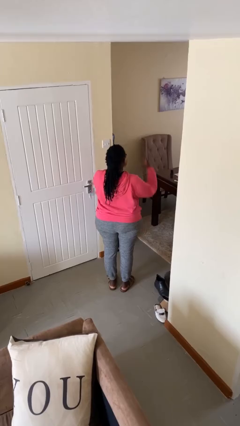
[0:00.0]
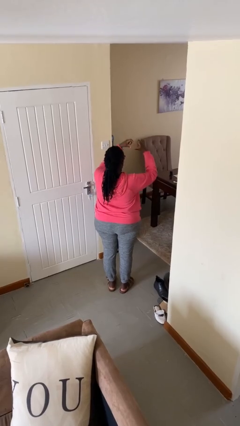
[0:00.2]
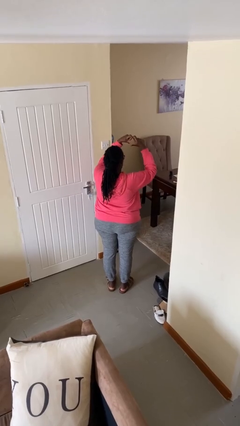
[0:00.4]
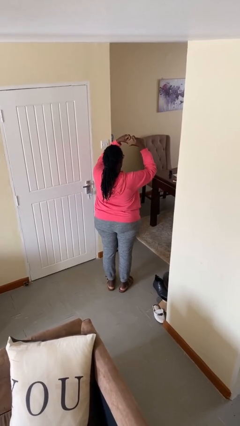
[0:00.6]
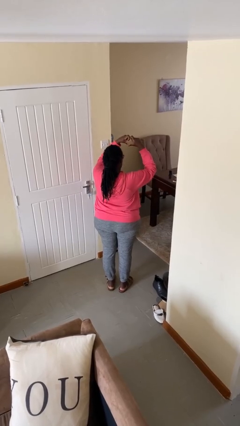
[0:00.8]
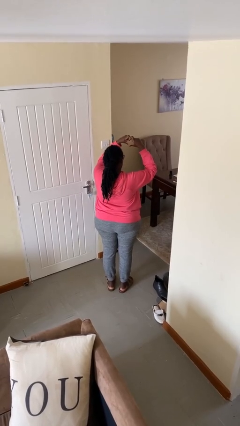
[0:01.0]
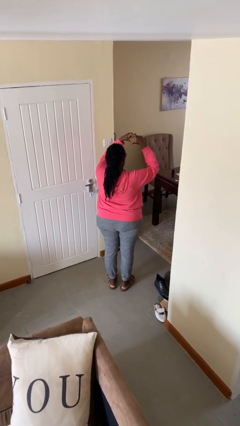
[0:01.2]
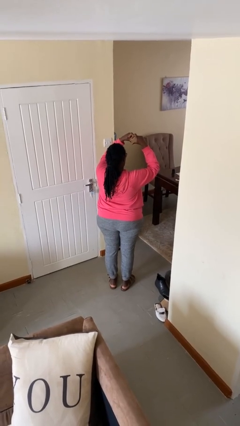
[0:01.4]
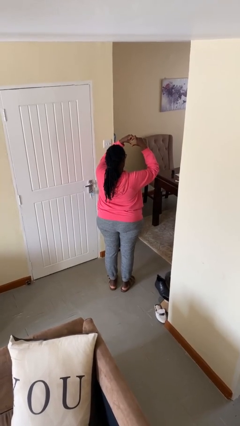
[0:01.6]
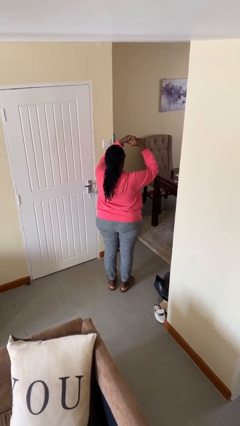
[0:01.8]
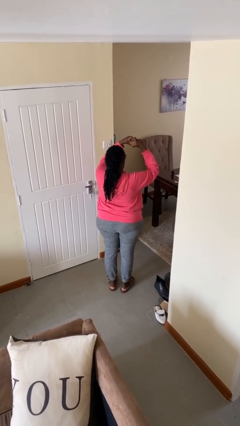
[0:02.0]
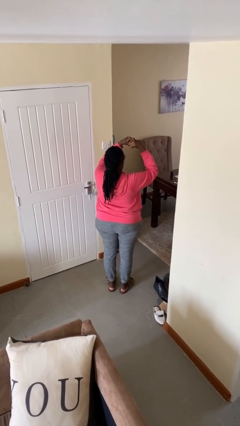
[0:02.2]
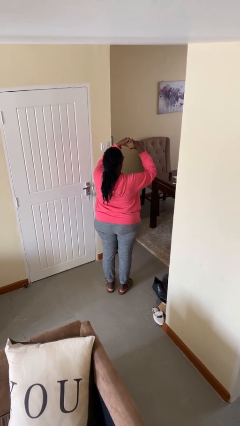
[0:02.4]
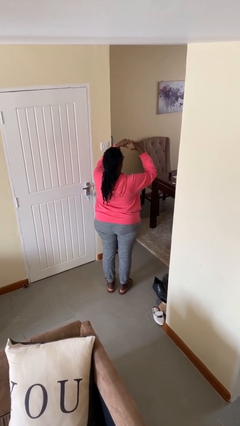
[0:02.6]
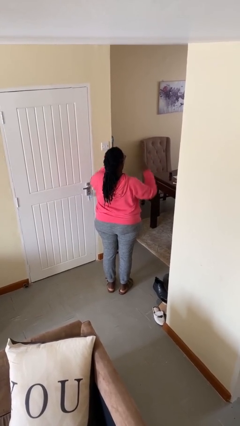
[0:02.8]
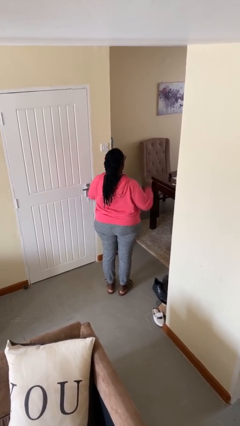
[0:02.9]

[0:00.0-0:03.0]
person gestures heart

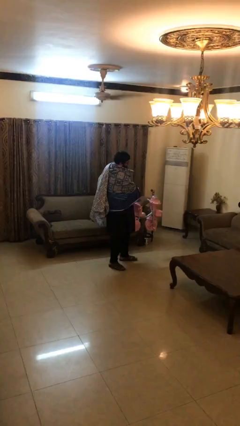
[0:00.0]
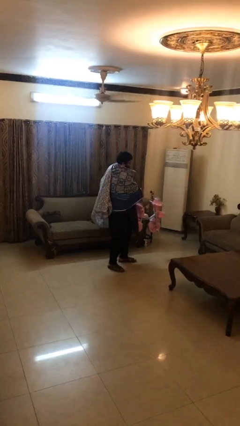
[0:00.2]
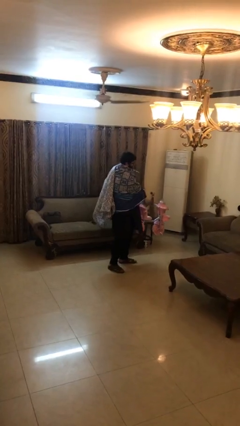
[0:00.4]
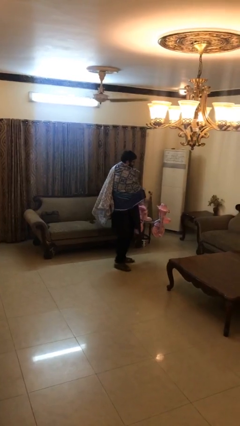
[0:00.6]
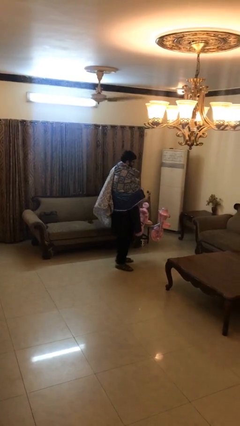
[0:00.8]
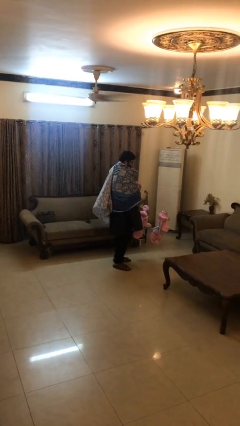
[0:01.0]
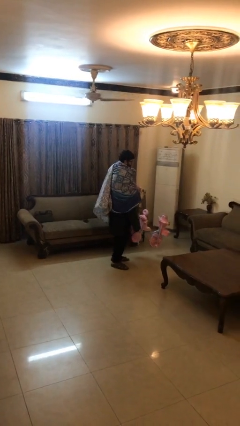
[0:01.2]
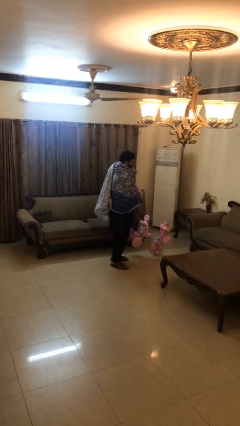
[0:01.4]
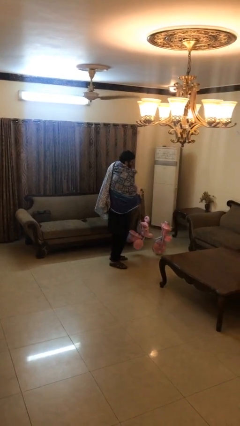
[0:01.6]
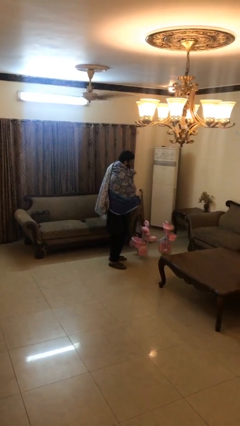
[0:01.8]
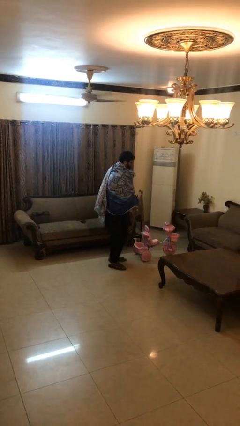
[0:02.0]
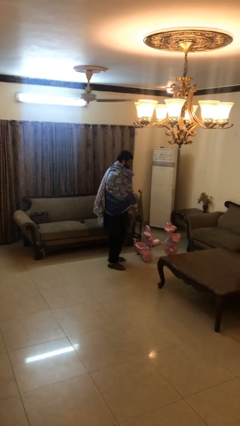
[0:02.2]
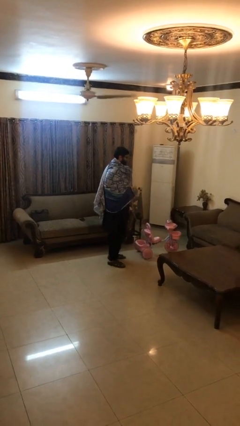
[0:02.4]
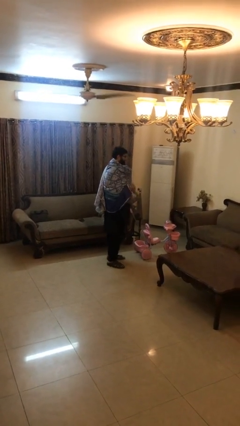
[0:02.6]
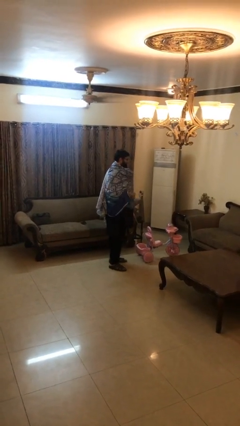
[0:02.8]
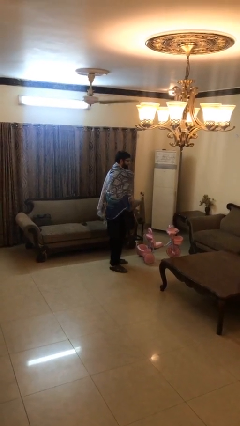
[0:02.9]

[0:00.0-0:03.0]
person puts down object on floor

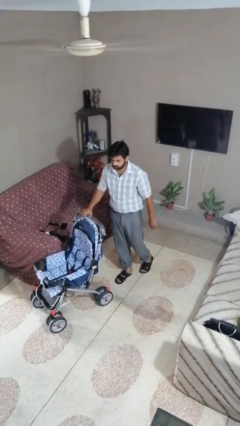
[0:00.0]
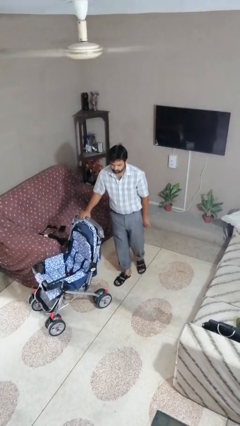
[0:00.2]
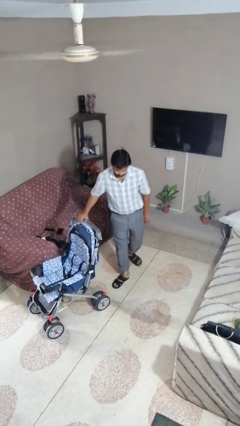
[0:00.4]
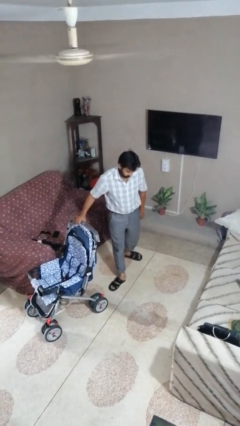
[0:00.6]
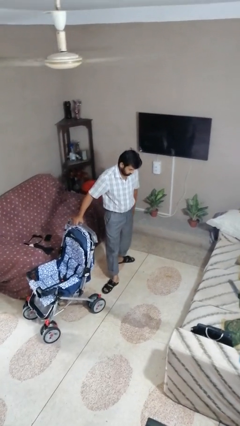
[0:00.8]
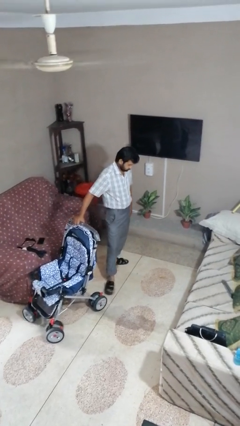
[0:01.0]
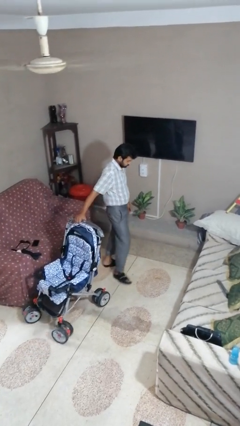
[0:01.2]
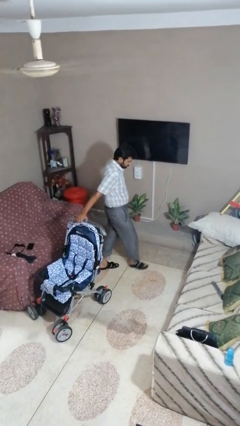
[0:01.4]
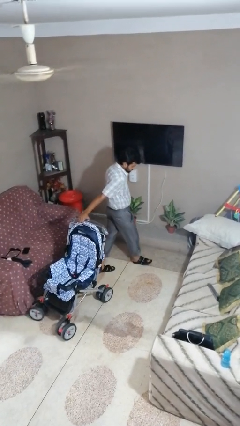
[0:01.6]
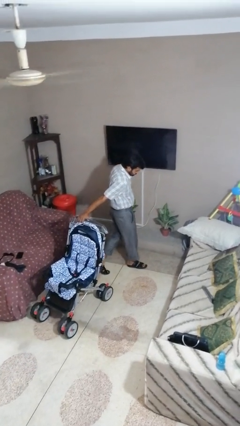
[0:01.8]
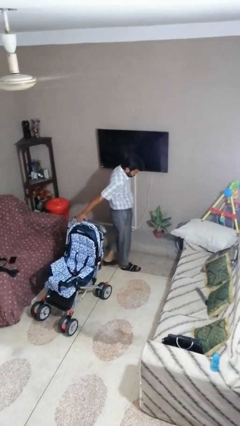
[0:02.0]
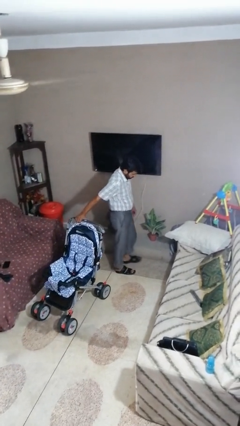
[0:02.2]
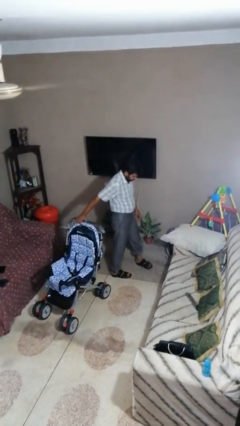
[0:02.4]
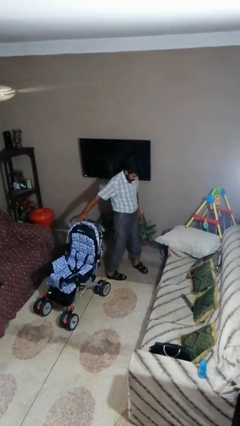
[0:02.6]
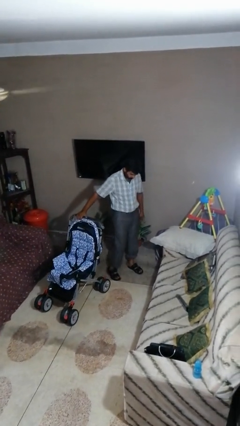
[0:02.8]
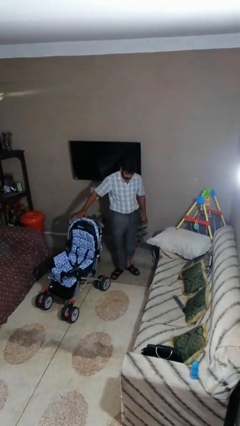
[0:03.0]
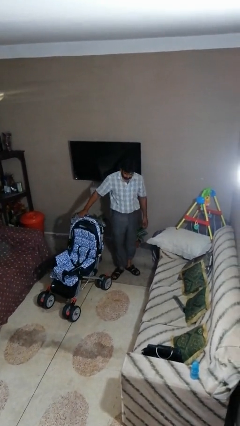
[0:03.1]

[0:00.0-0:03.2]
person pulls wheeled cart

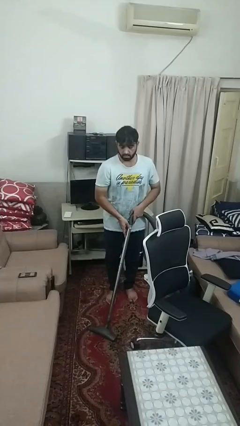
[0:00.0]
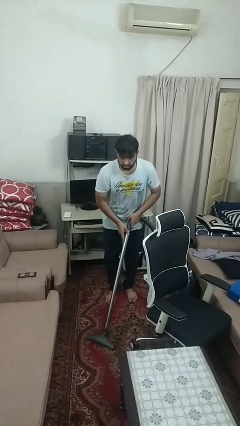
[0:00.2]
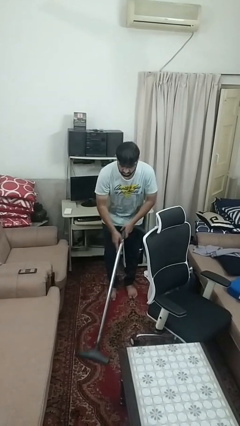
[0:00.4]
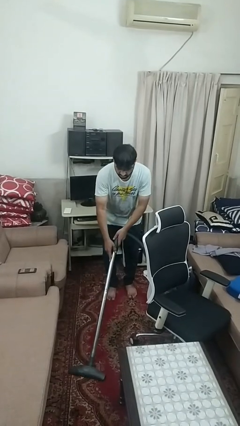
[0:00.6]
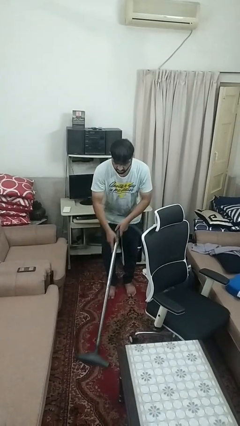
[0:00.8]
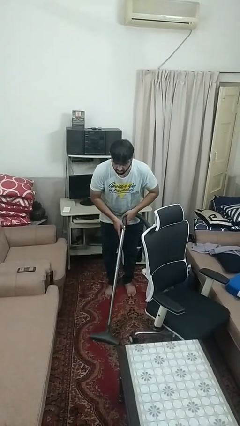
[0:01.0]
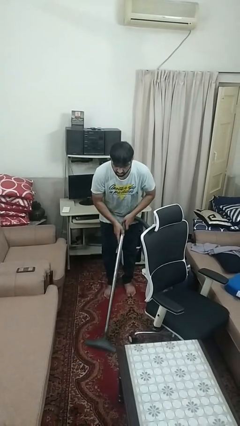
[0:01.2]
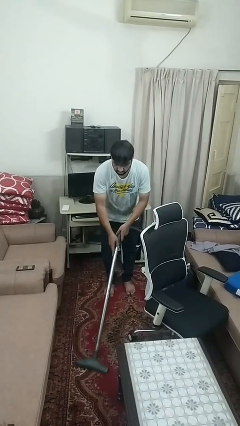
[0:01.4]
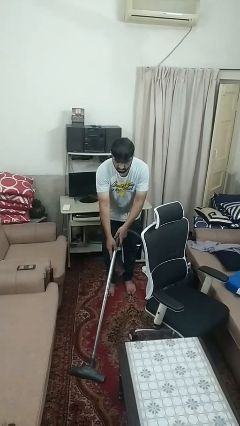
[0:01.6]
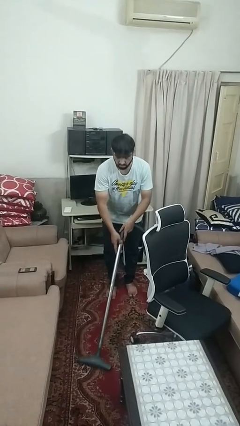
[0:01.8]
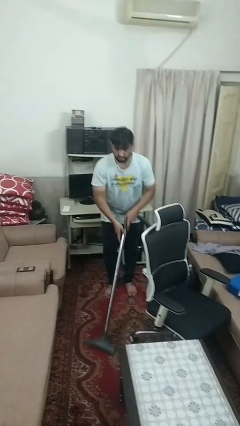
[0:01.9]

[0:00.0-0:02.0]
person vacuums carpet

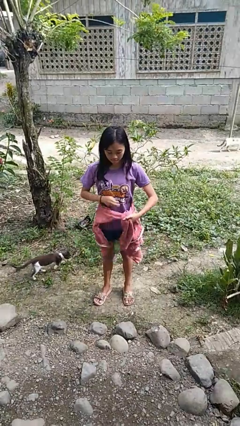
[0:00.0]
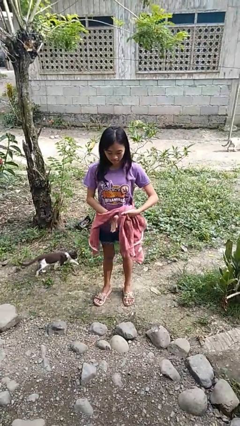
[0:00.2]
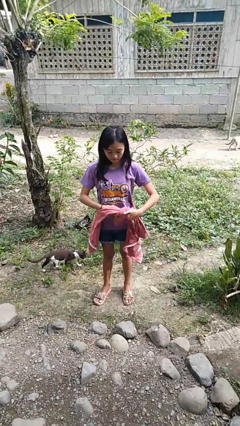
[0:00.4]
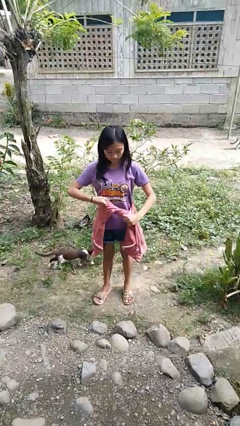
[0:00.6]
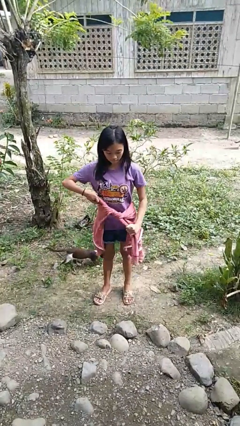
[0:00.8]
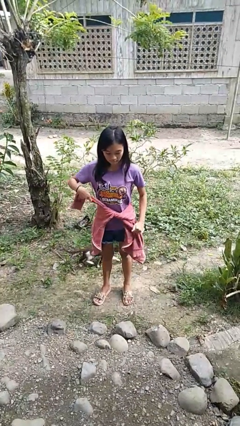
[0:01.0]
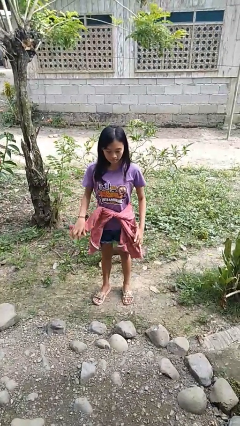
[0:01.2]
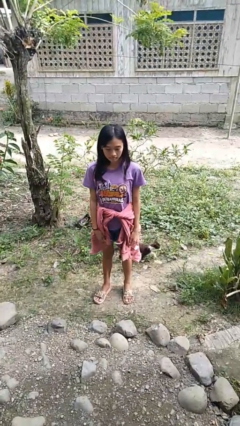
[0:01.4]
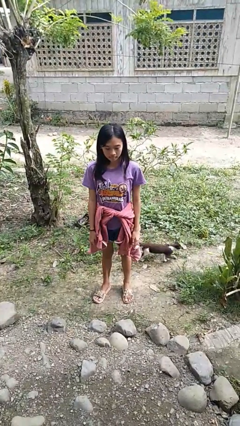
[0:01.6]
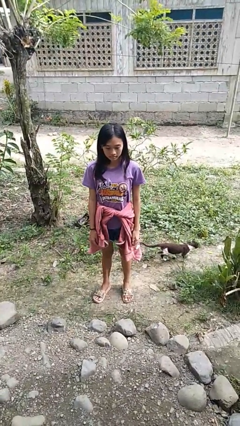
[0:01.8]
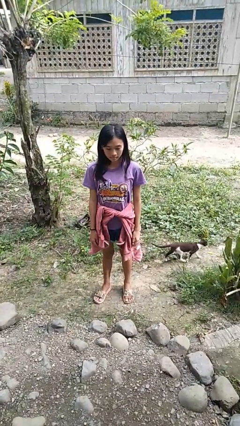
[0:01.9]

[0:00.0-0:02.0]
person ties jacket around waist

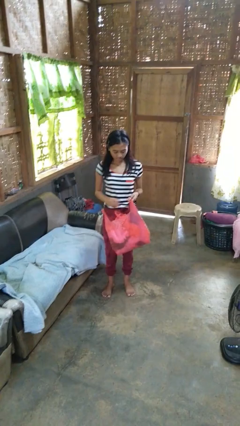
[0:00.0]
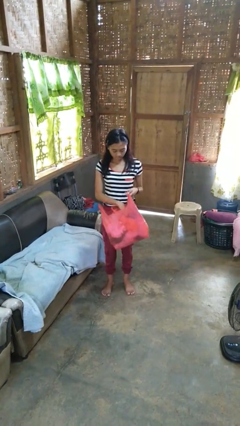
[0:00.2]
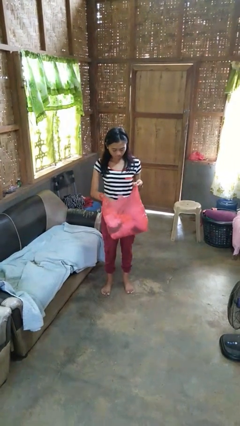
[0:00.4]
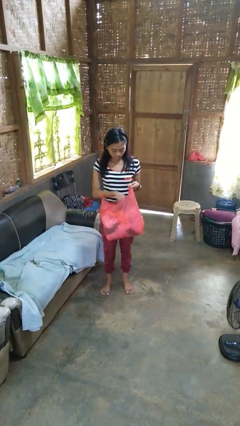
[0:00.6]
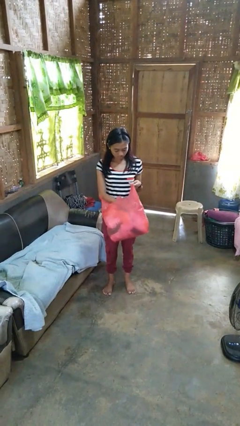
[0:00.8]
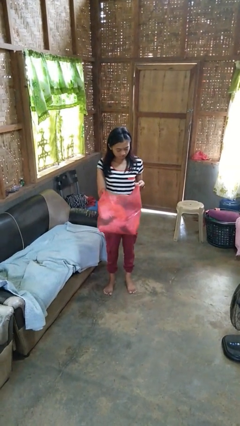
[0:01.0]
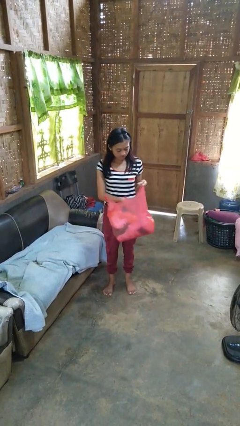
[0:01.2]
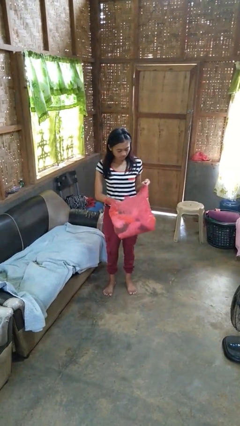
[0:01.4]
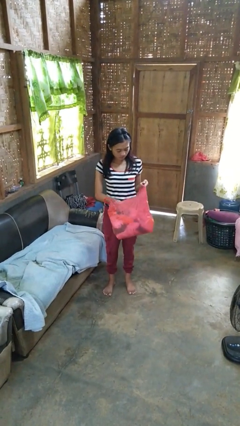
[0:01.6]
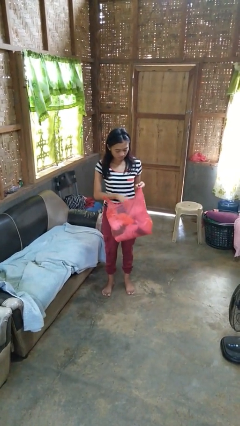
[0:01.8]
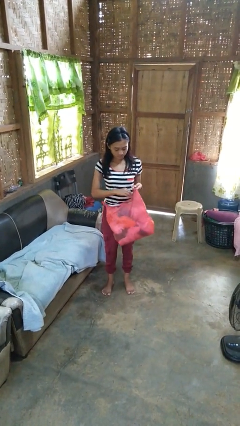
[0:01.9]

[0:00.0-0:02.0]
person searches in bag

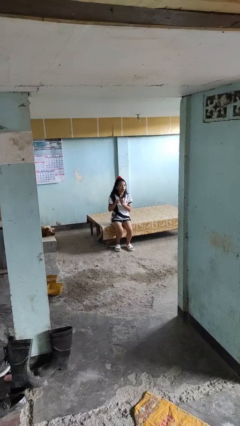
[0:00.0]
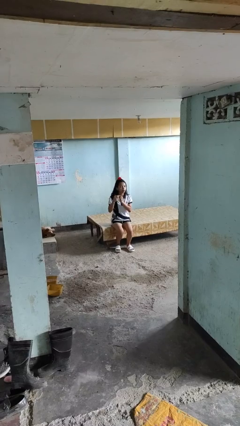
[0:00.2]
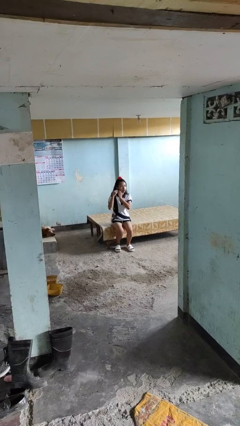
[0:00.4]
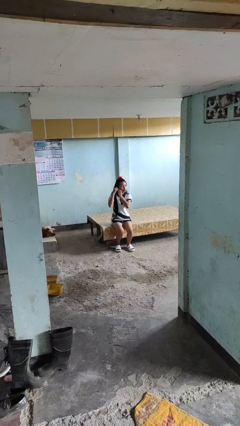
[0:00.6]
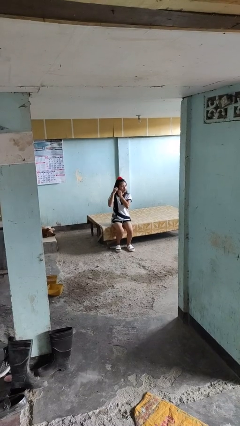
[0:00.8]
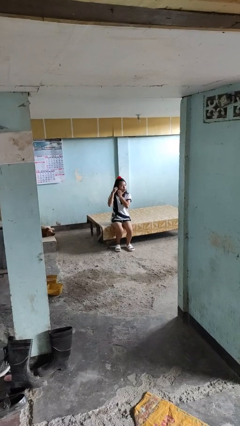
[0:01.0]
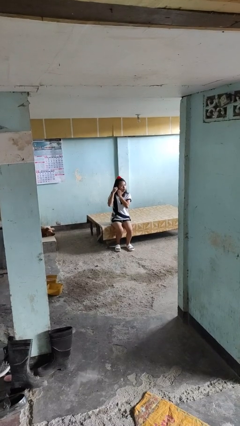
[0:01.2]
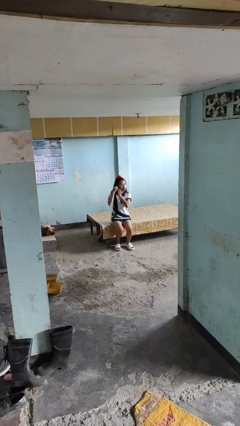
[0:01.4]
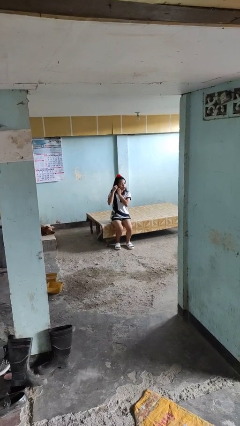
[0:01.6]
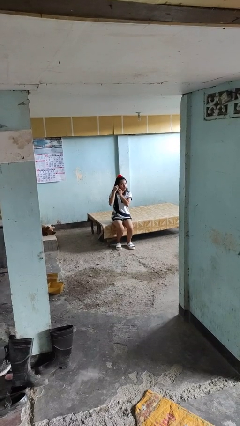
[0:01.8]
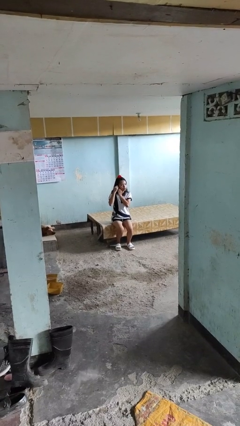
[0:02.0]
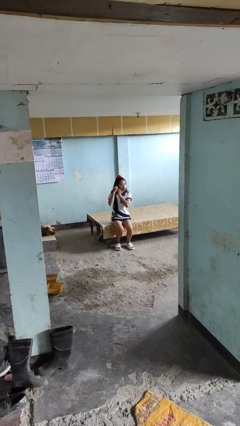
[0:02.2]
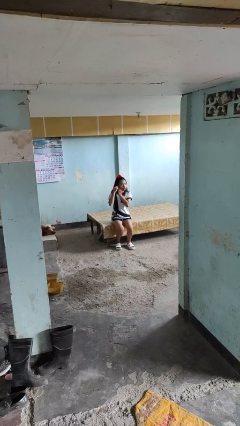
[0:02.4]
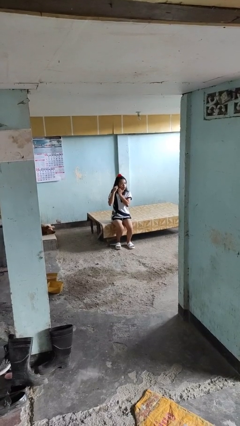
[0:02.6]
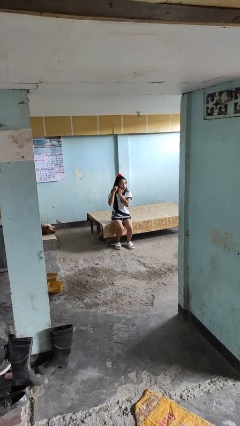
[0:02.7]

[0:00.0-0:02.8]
person puts on earrings
